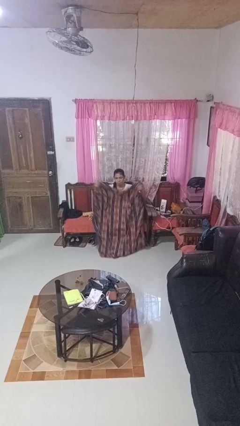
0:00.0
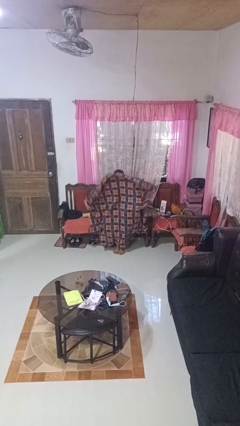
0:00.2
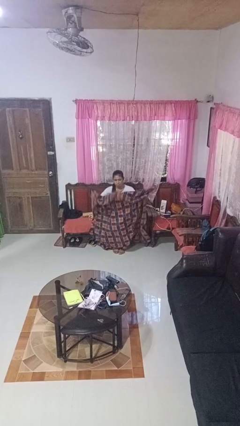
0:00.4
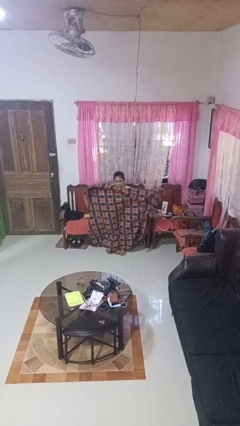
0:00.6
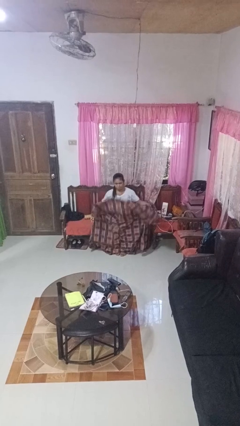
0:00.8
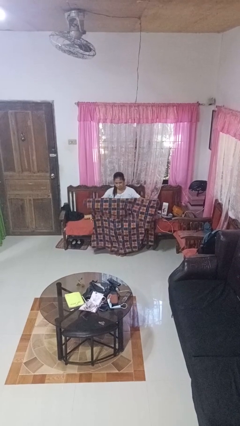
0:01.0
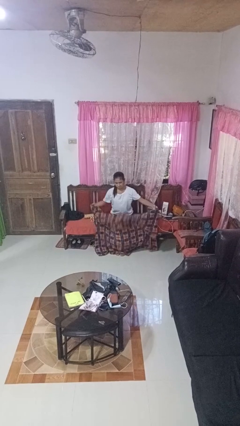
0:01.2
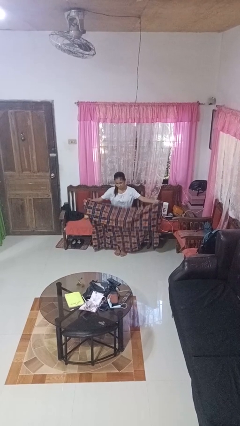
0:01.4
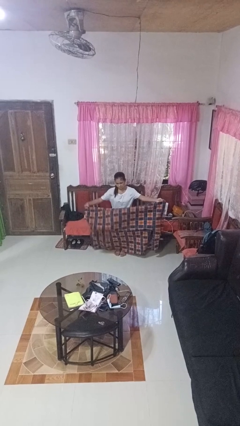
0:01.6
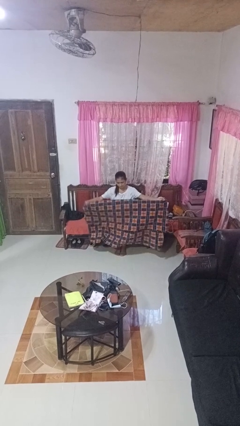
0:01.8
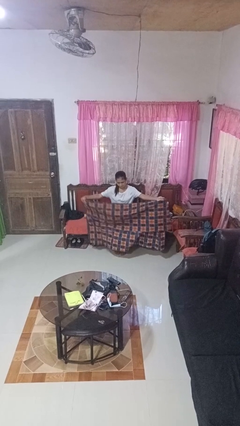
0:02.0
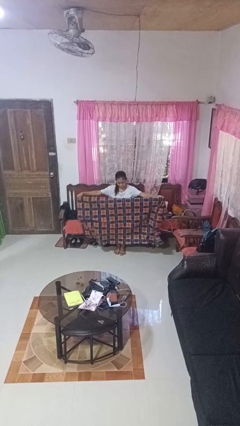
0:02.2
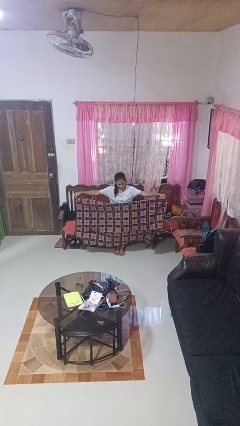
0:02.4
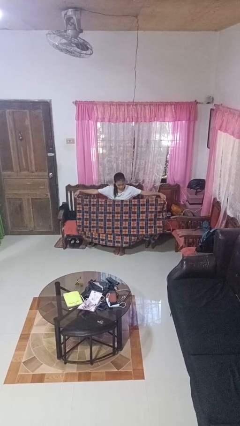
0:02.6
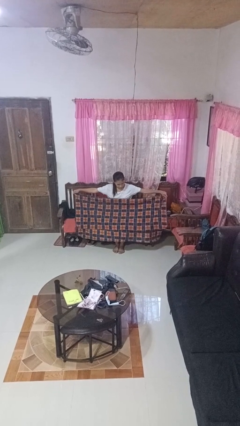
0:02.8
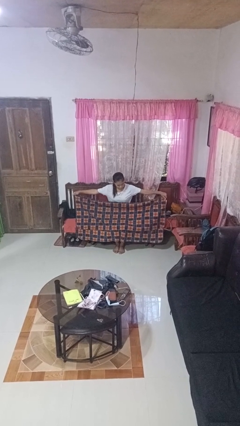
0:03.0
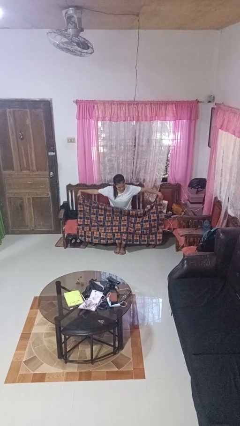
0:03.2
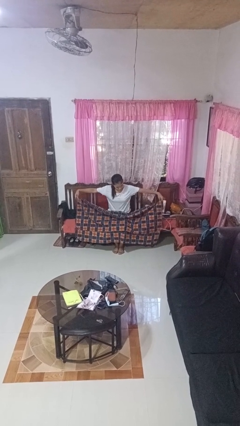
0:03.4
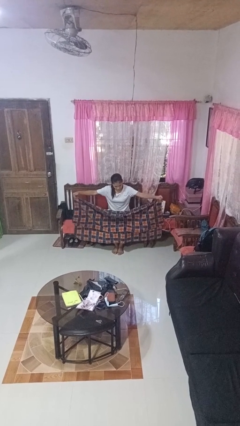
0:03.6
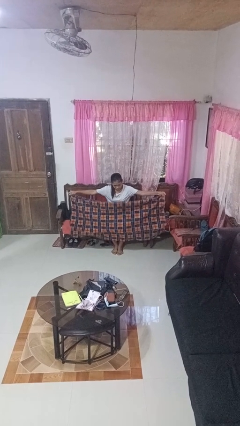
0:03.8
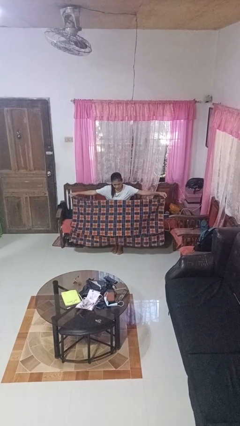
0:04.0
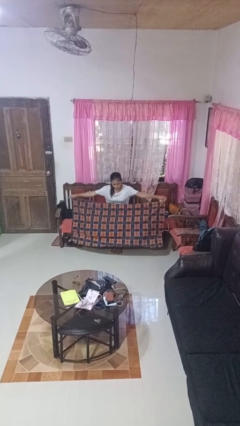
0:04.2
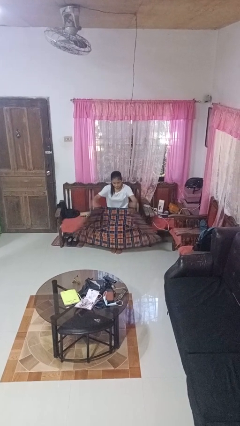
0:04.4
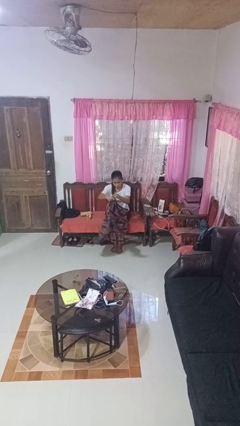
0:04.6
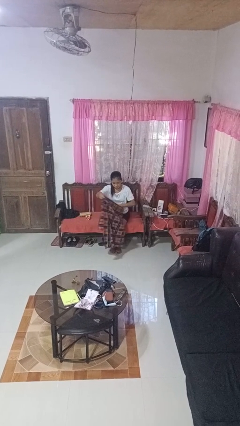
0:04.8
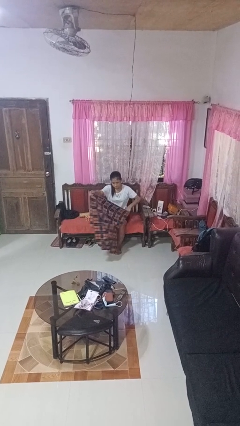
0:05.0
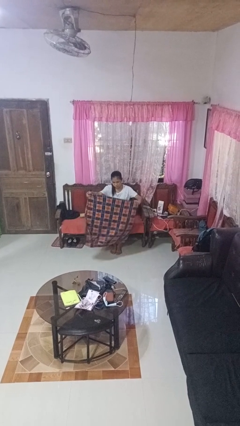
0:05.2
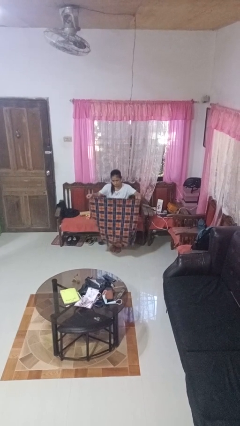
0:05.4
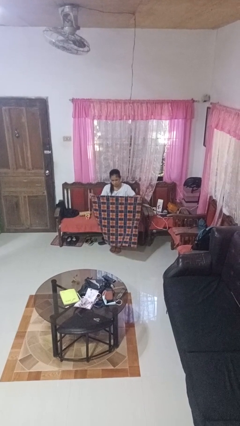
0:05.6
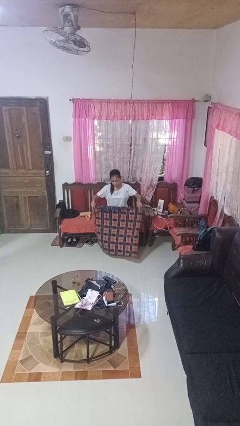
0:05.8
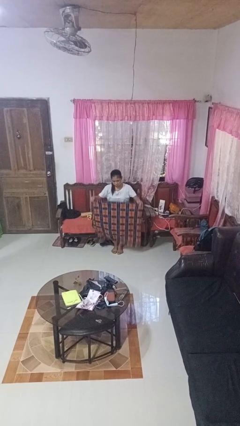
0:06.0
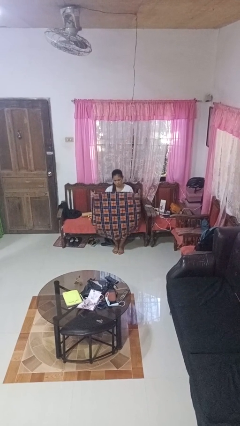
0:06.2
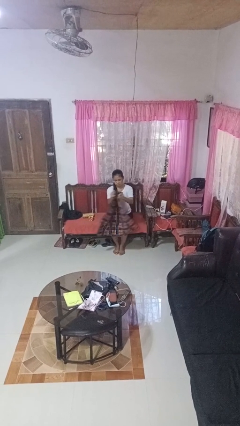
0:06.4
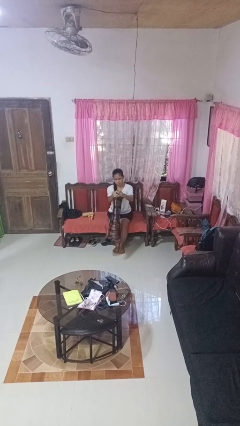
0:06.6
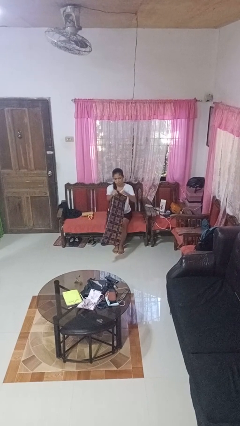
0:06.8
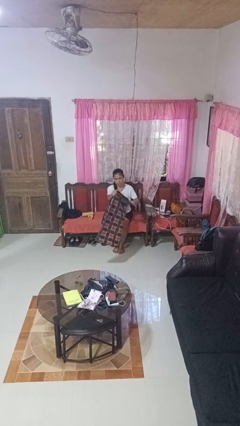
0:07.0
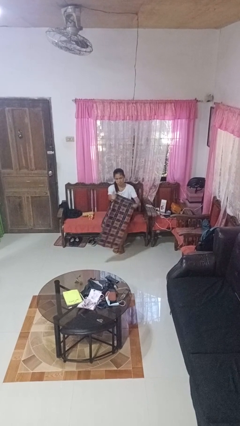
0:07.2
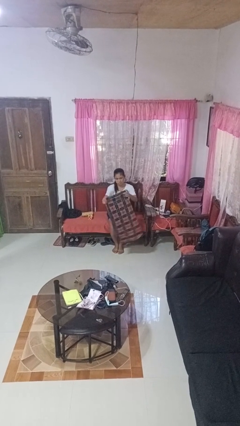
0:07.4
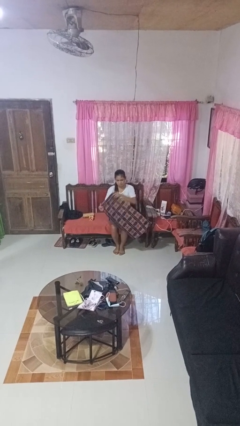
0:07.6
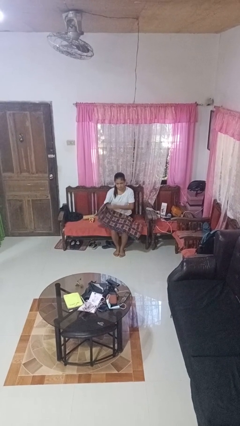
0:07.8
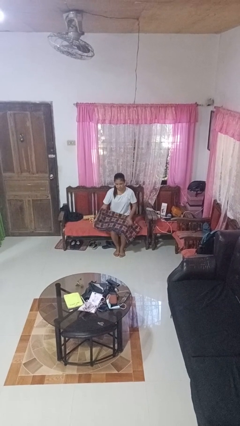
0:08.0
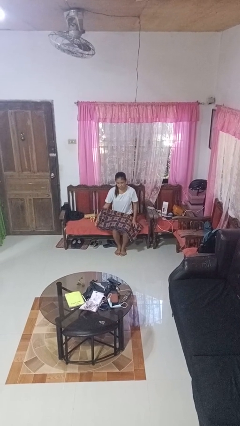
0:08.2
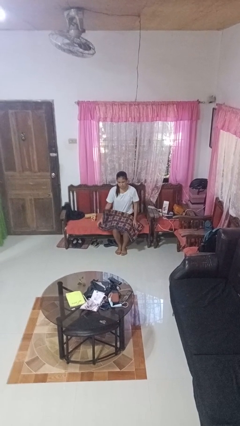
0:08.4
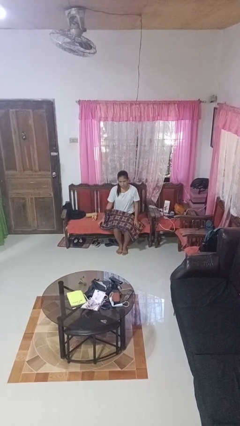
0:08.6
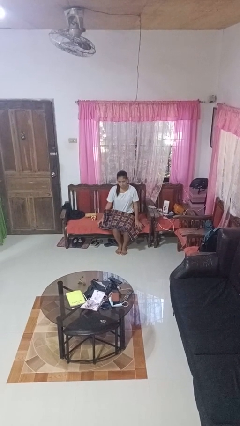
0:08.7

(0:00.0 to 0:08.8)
person folds blanket

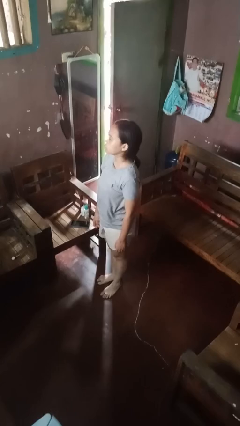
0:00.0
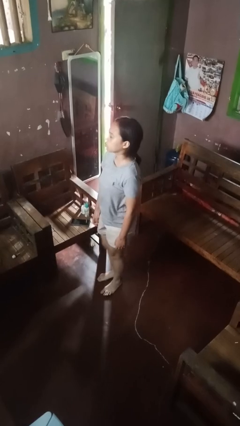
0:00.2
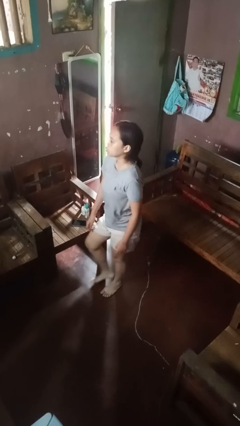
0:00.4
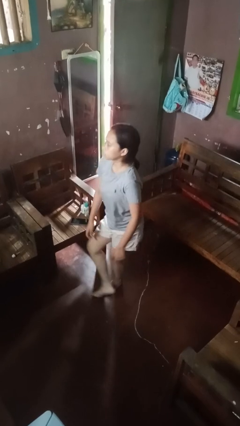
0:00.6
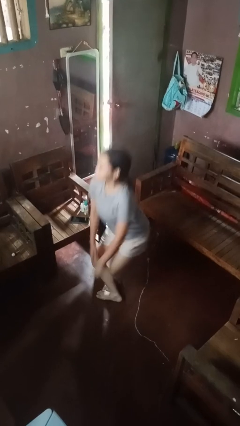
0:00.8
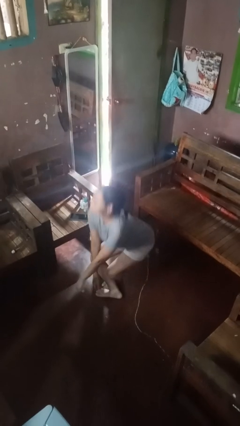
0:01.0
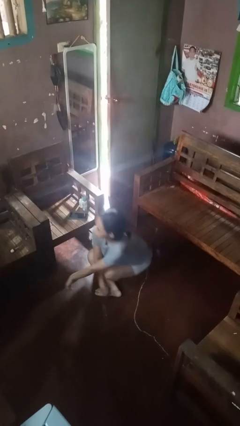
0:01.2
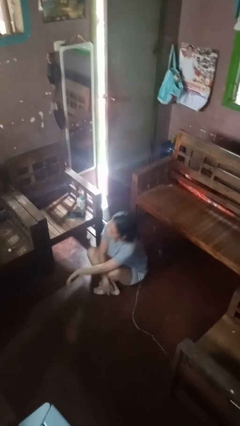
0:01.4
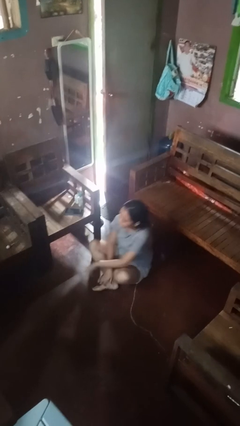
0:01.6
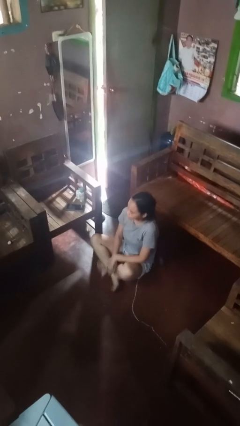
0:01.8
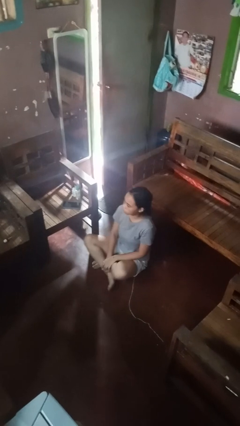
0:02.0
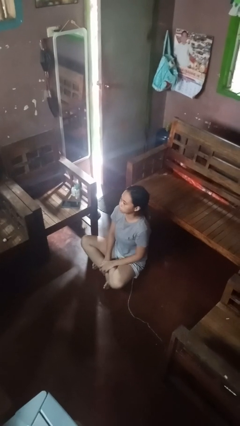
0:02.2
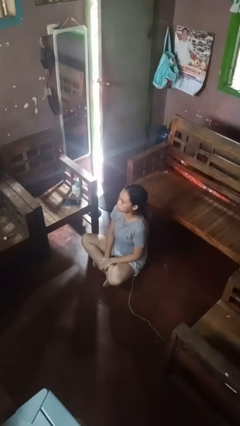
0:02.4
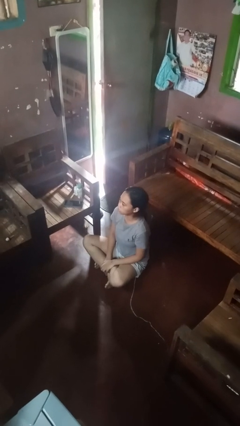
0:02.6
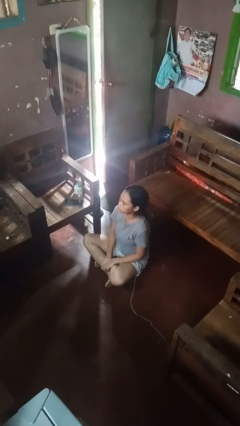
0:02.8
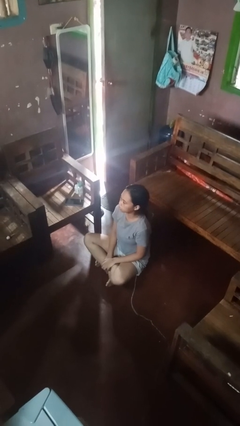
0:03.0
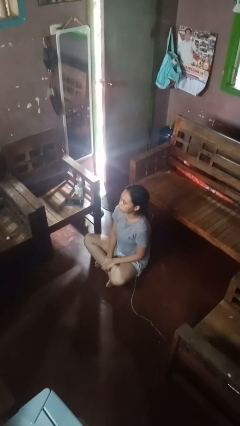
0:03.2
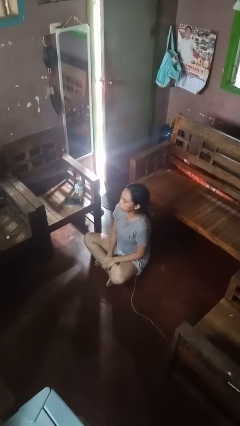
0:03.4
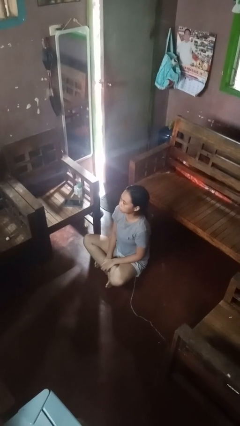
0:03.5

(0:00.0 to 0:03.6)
person sits crisscross

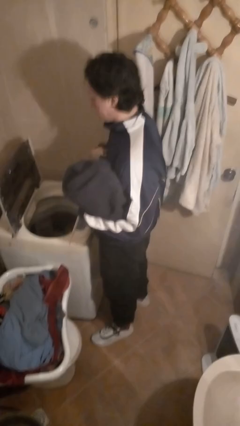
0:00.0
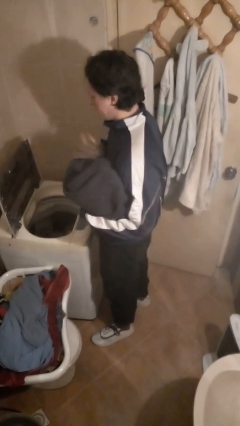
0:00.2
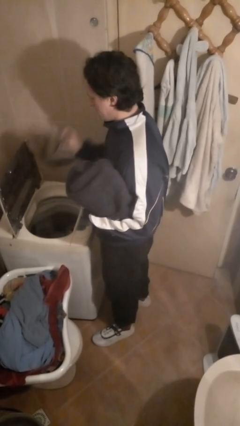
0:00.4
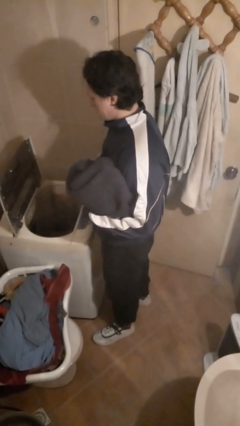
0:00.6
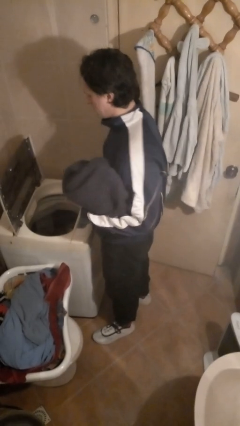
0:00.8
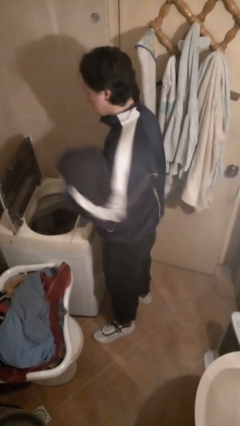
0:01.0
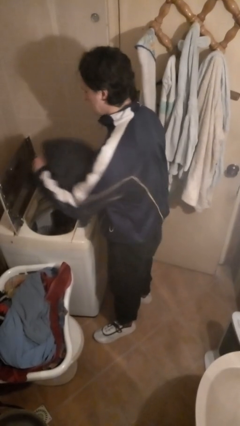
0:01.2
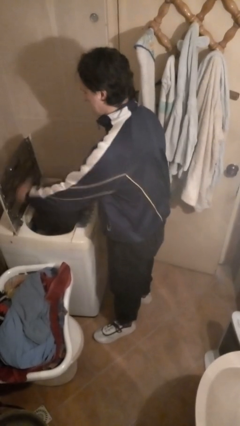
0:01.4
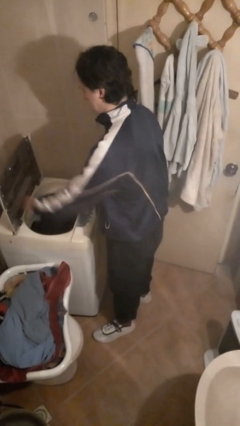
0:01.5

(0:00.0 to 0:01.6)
person loads clotheswasher

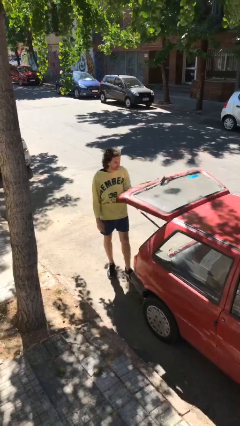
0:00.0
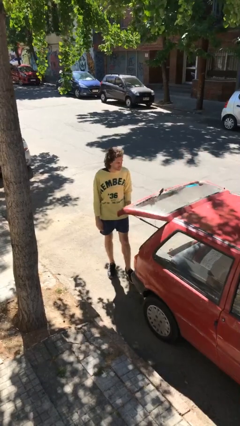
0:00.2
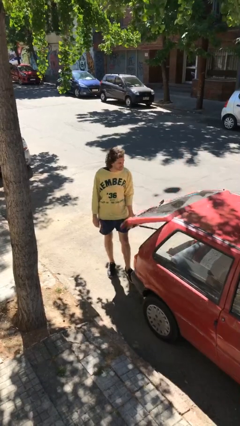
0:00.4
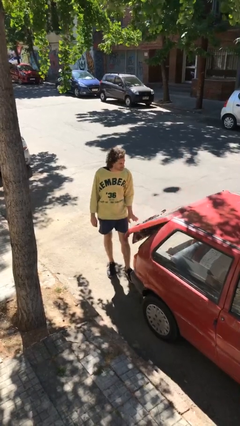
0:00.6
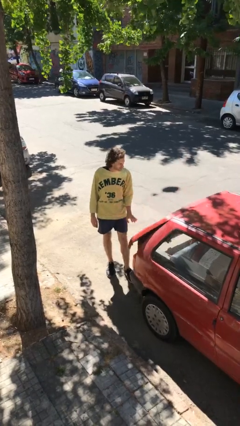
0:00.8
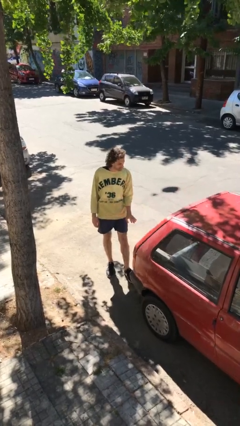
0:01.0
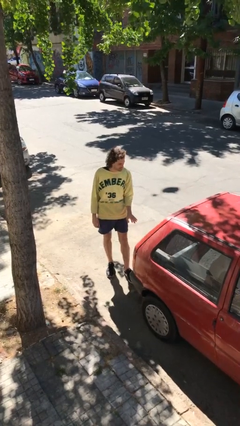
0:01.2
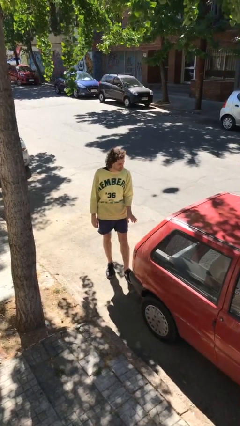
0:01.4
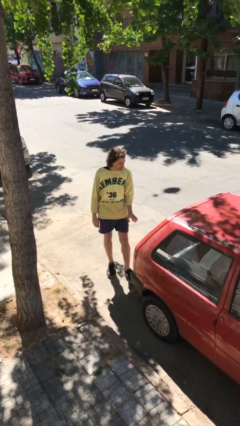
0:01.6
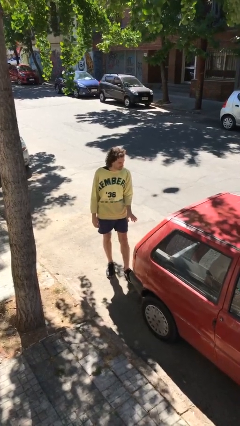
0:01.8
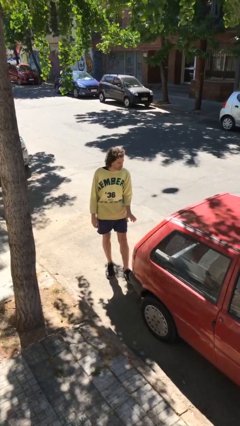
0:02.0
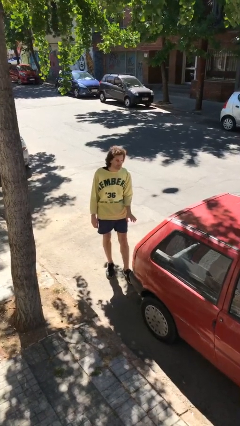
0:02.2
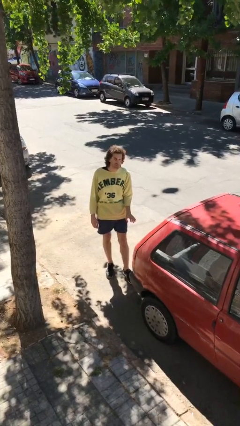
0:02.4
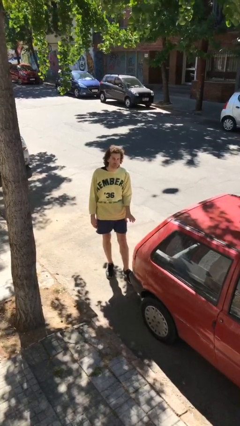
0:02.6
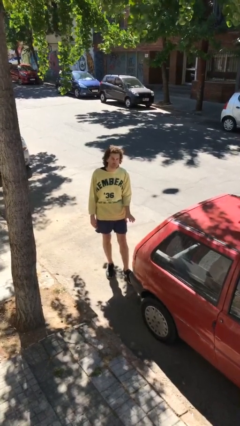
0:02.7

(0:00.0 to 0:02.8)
person closes car trunk

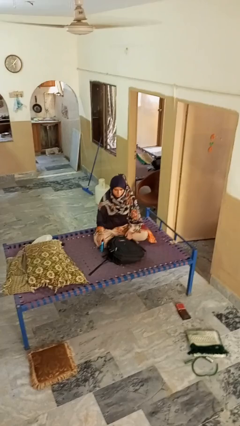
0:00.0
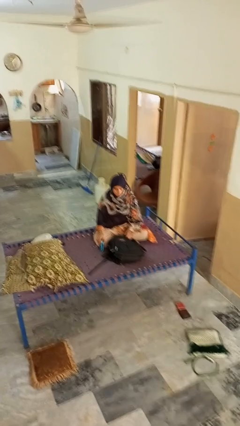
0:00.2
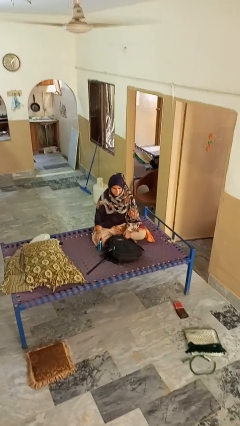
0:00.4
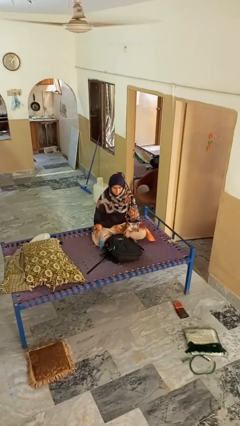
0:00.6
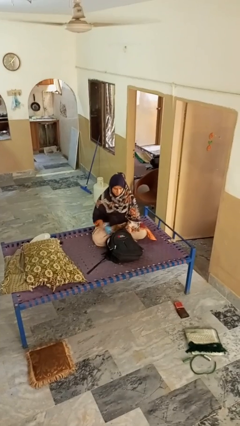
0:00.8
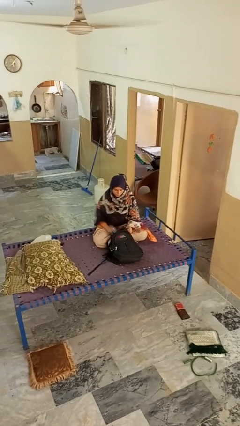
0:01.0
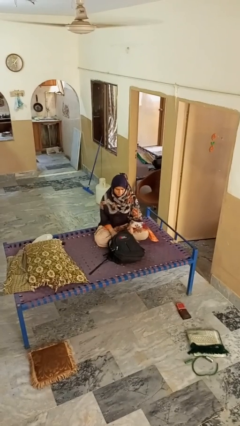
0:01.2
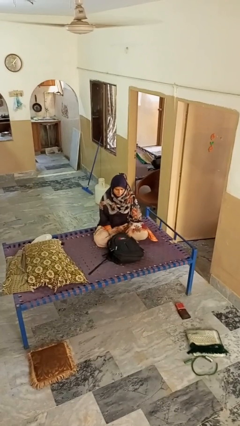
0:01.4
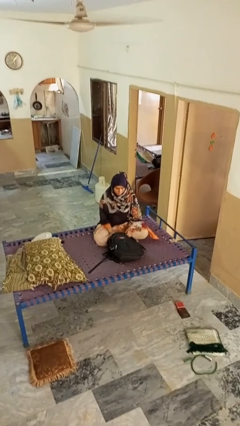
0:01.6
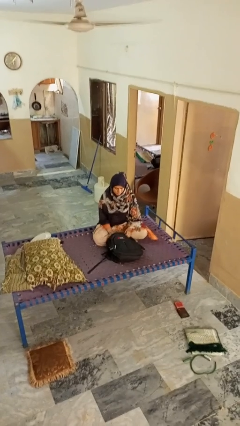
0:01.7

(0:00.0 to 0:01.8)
person puts object into bag
